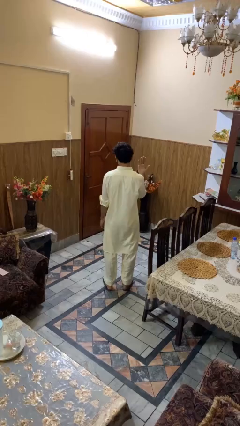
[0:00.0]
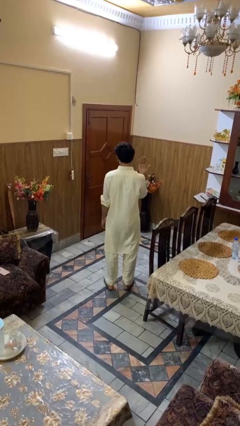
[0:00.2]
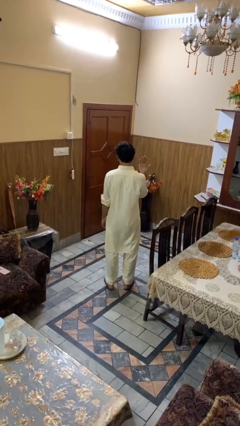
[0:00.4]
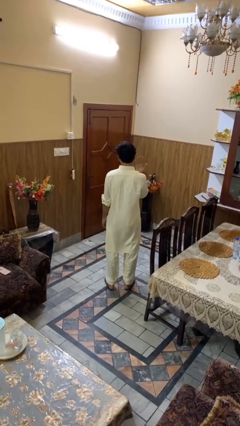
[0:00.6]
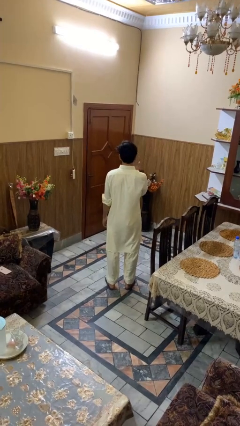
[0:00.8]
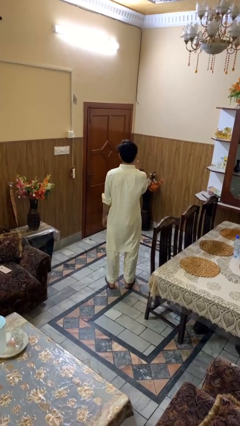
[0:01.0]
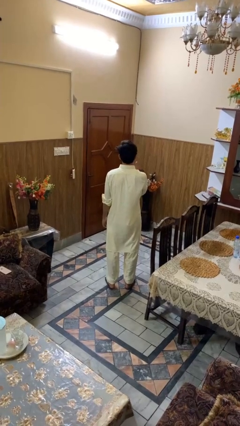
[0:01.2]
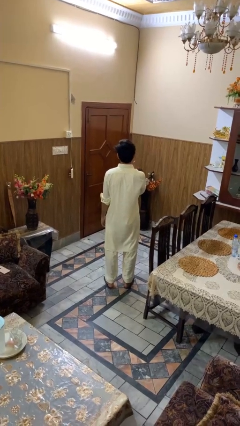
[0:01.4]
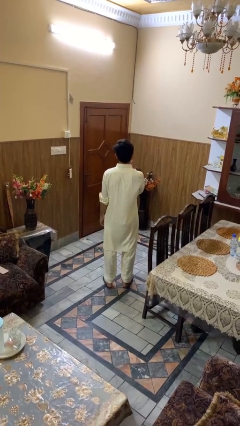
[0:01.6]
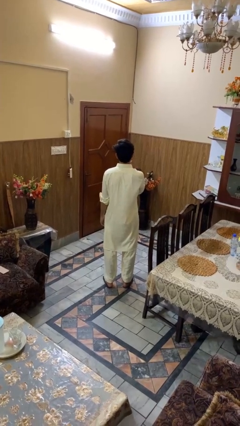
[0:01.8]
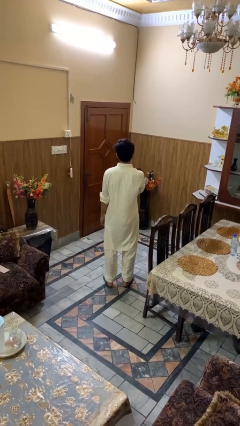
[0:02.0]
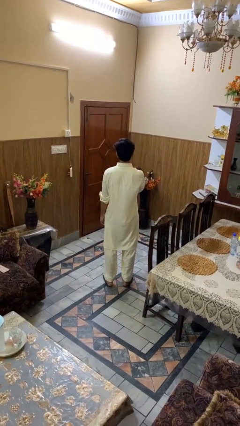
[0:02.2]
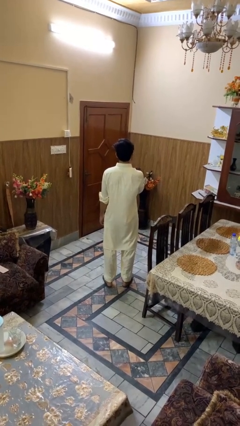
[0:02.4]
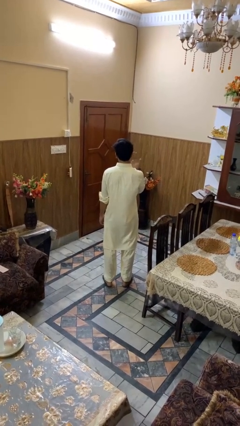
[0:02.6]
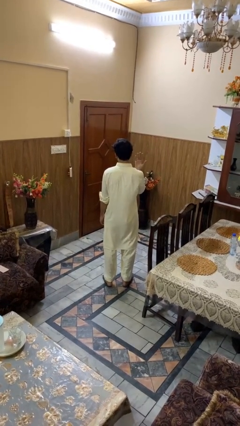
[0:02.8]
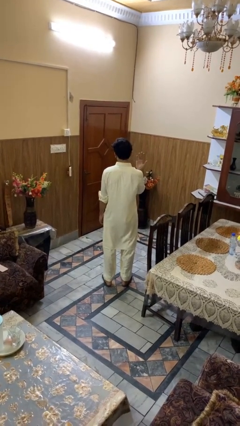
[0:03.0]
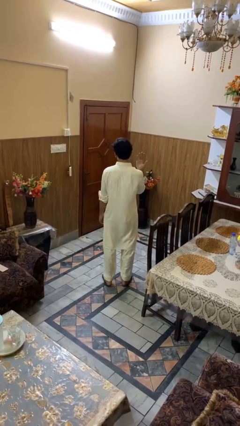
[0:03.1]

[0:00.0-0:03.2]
person licks fingers

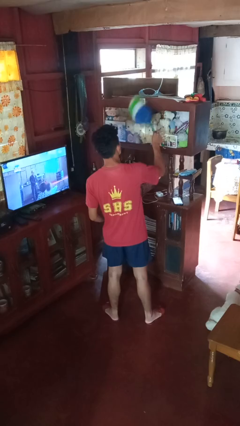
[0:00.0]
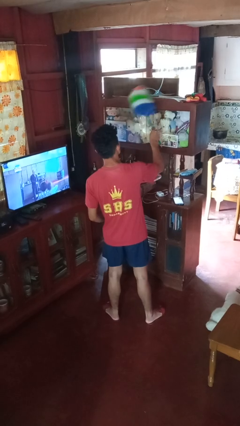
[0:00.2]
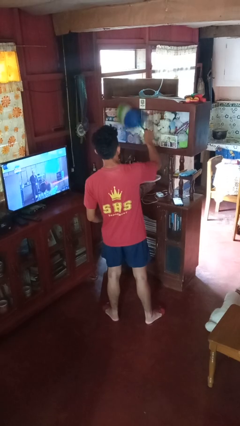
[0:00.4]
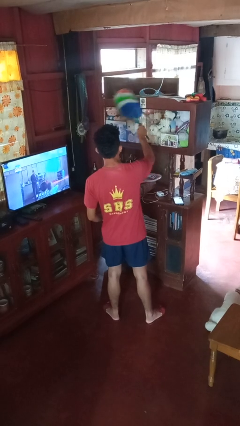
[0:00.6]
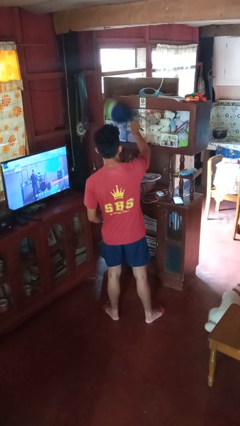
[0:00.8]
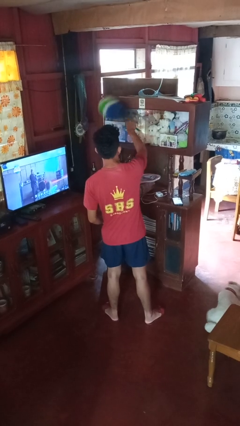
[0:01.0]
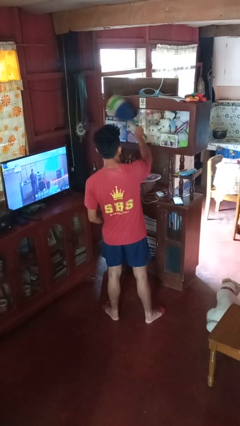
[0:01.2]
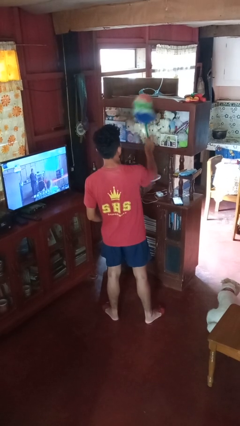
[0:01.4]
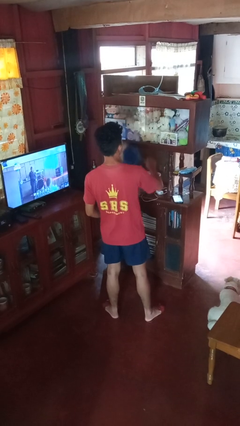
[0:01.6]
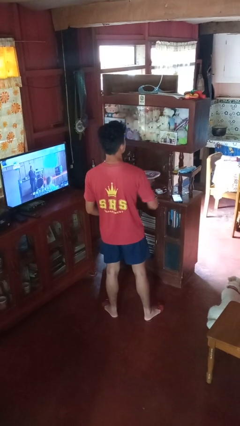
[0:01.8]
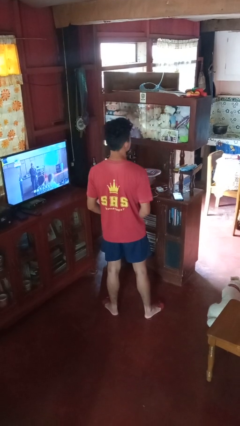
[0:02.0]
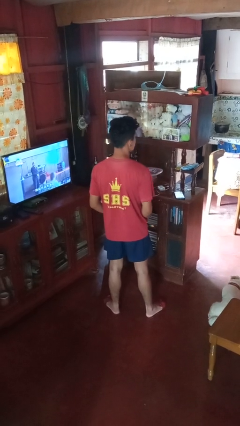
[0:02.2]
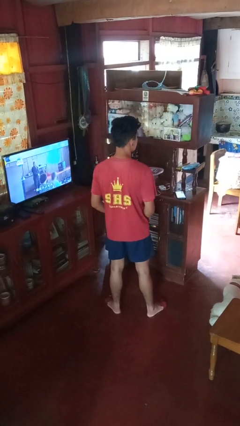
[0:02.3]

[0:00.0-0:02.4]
person dusts furniture

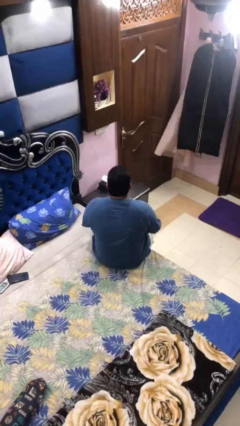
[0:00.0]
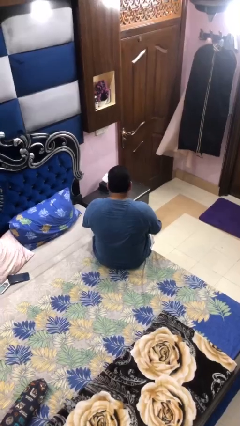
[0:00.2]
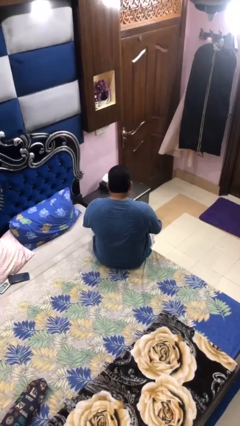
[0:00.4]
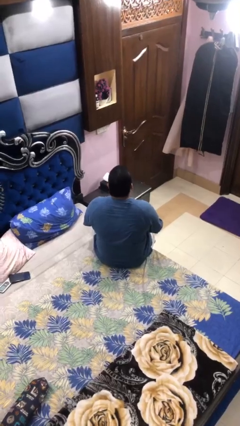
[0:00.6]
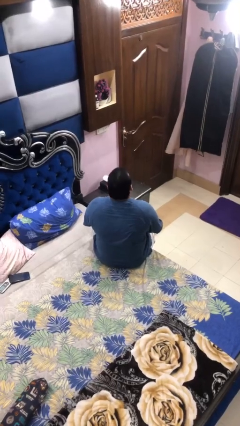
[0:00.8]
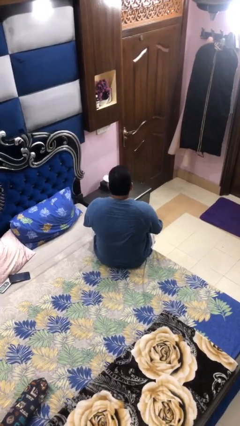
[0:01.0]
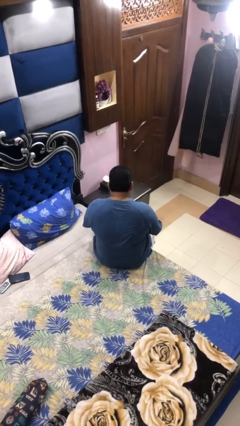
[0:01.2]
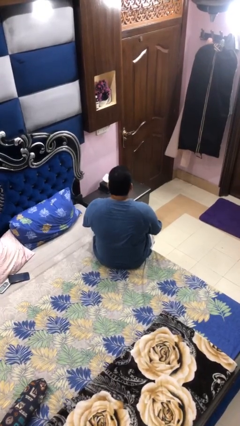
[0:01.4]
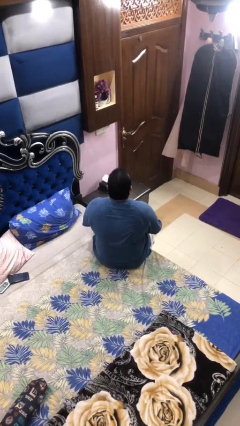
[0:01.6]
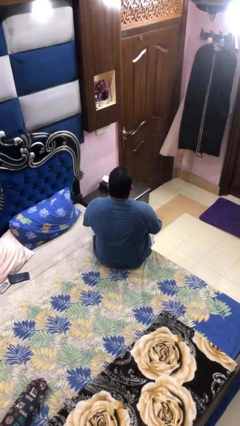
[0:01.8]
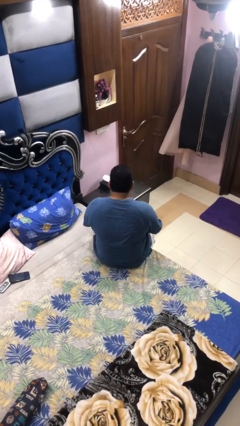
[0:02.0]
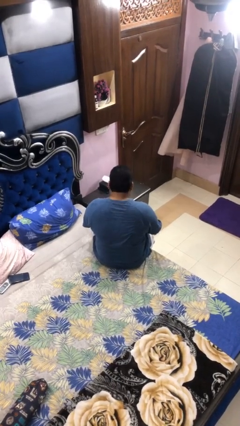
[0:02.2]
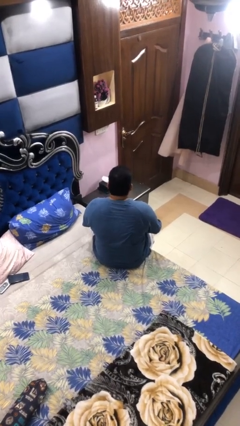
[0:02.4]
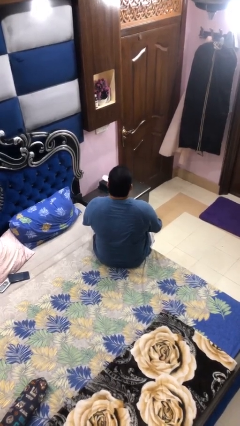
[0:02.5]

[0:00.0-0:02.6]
person nods head

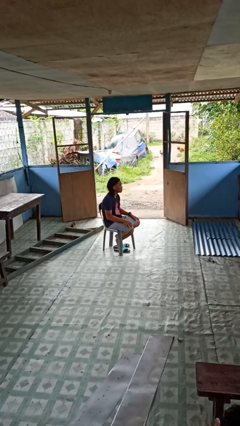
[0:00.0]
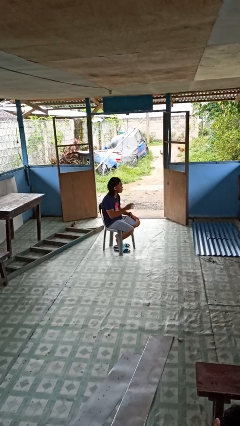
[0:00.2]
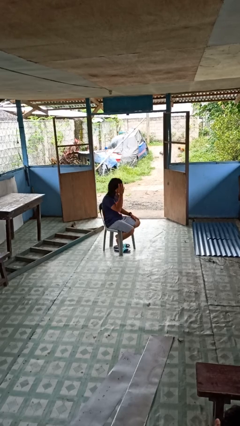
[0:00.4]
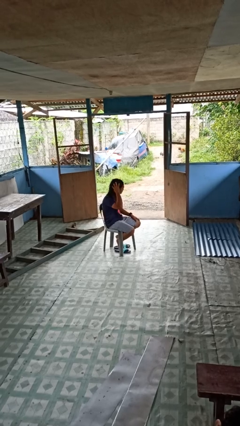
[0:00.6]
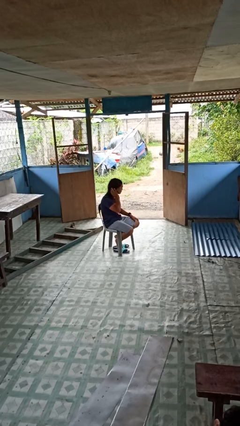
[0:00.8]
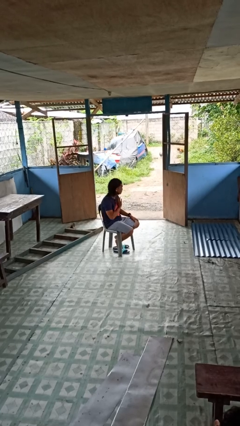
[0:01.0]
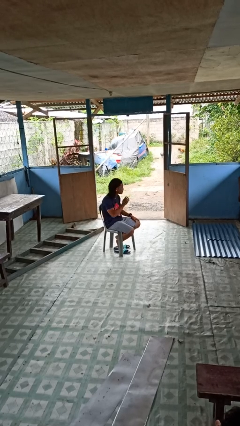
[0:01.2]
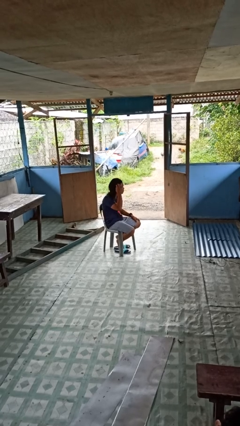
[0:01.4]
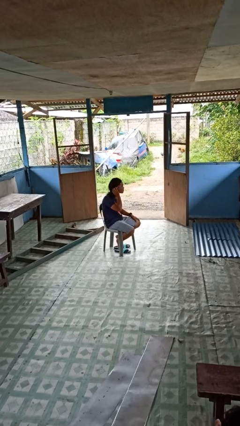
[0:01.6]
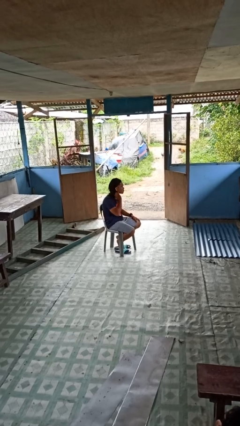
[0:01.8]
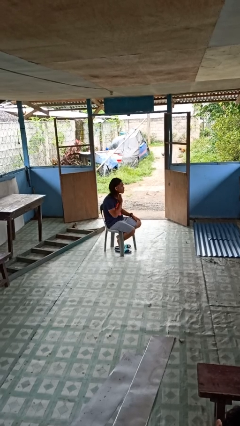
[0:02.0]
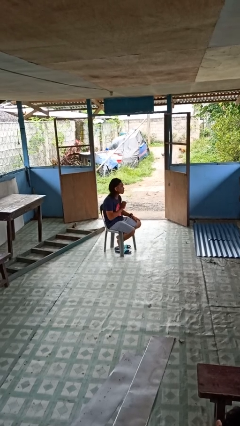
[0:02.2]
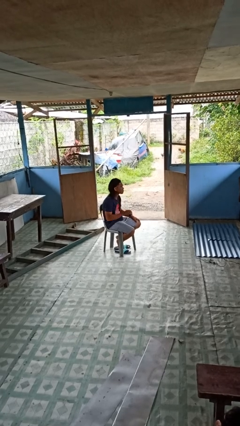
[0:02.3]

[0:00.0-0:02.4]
person strokes hair

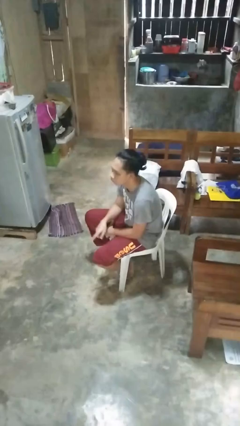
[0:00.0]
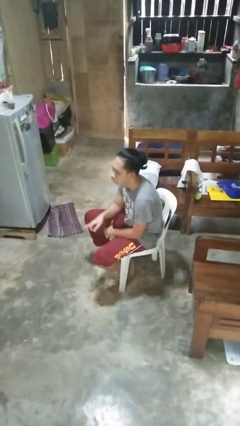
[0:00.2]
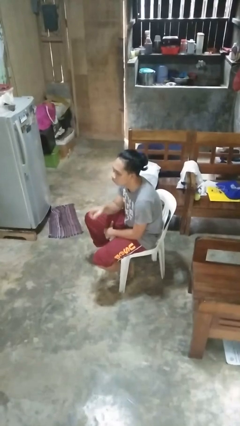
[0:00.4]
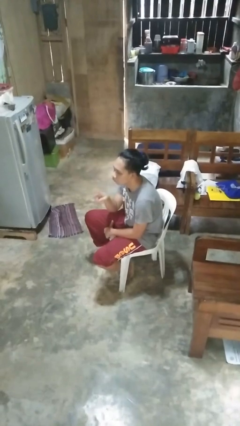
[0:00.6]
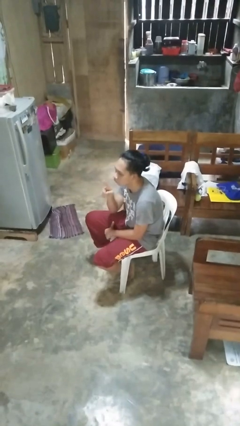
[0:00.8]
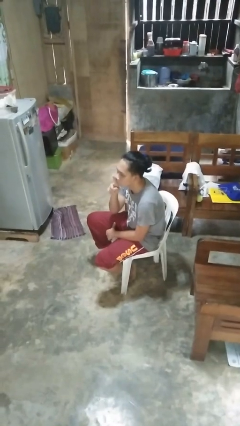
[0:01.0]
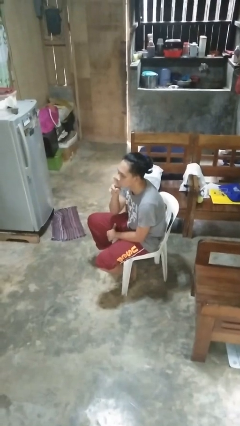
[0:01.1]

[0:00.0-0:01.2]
person gestures be quiet

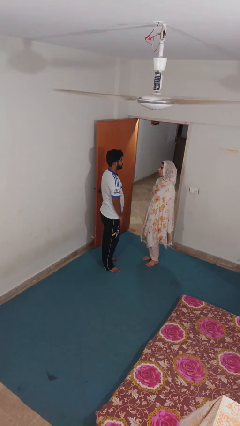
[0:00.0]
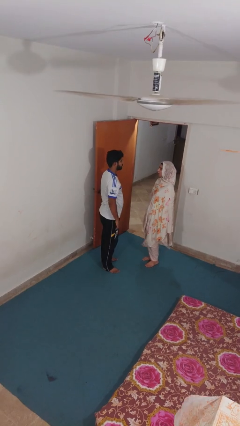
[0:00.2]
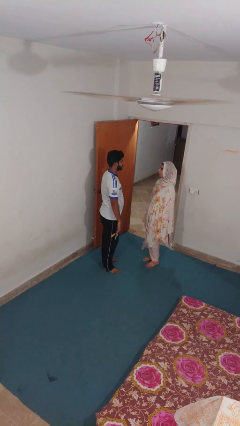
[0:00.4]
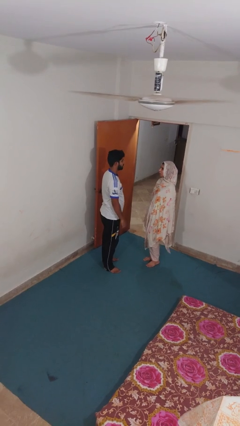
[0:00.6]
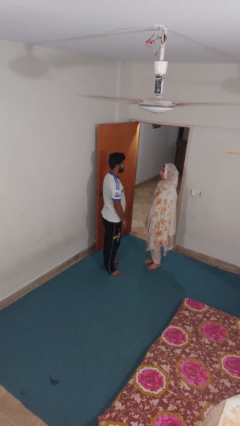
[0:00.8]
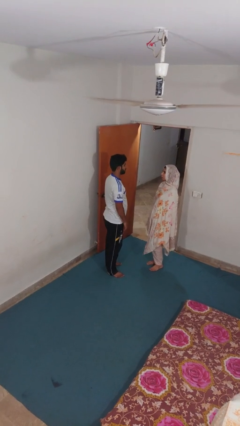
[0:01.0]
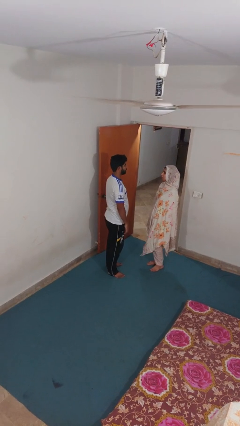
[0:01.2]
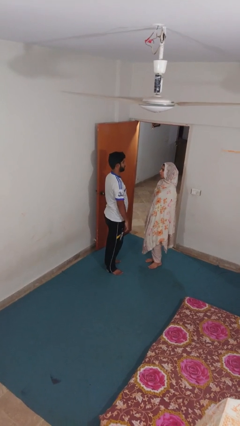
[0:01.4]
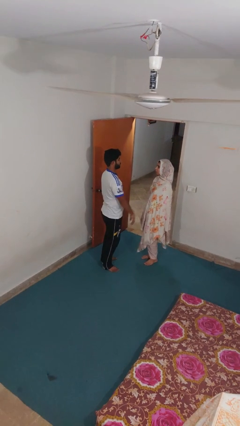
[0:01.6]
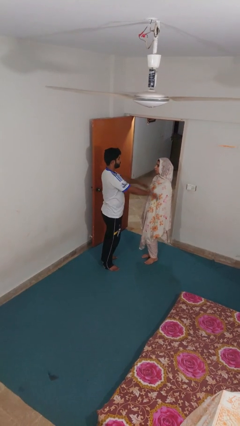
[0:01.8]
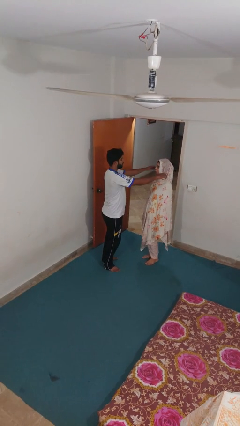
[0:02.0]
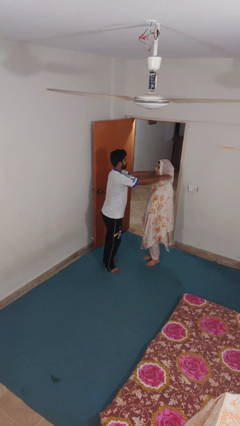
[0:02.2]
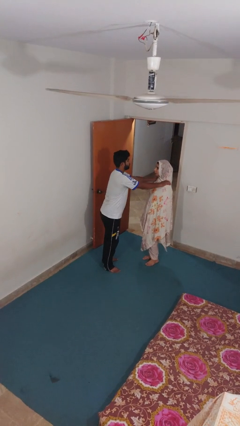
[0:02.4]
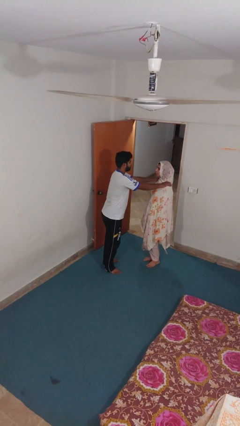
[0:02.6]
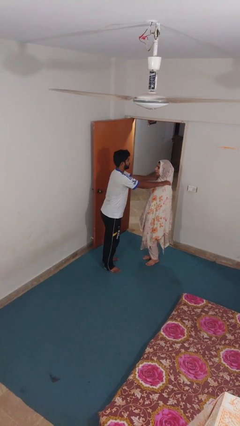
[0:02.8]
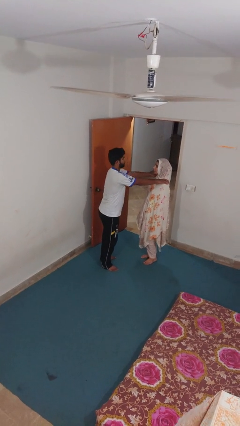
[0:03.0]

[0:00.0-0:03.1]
person pounds shoulders of person

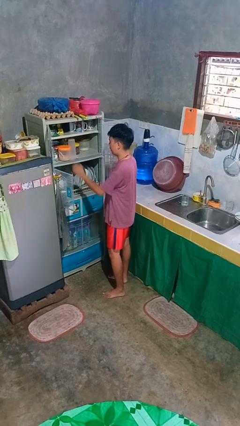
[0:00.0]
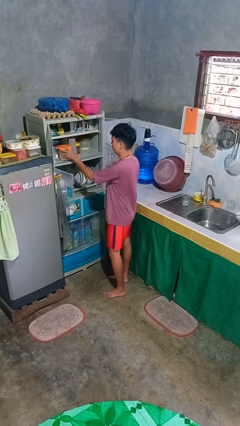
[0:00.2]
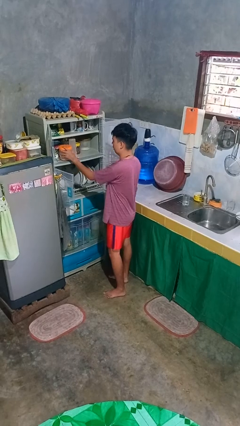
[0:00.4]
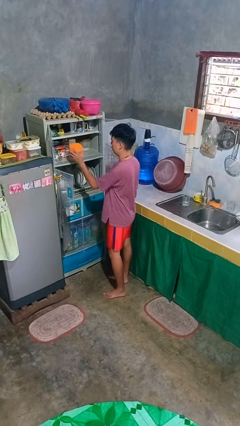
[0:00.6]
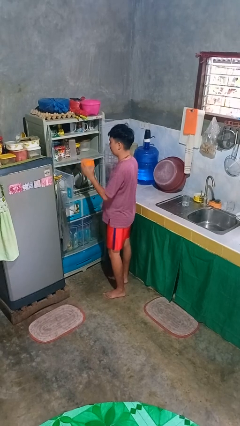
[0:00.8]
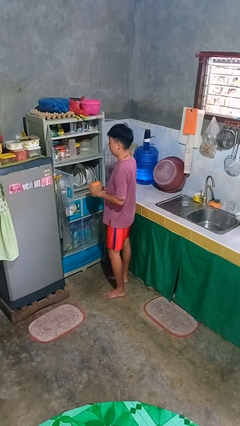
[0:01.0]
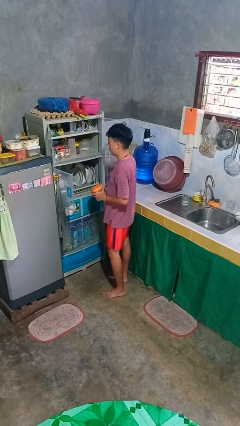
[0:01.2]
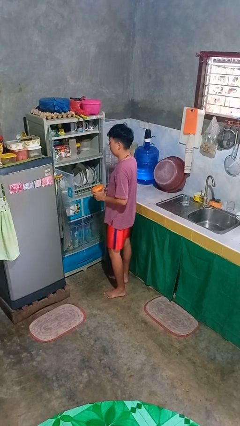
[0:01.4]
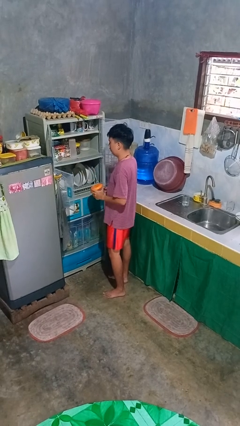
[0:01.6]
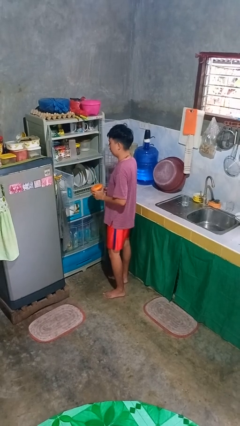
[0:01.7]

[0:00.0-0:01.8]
person takes object from cabinet

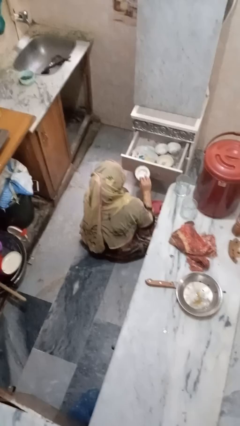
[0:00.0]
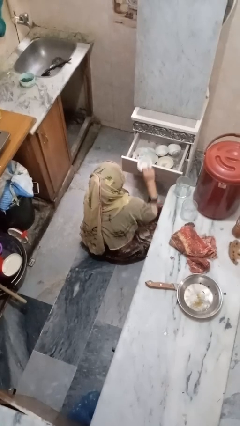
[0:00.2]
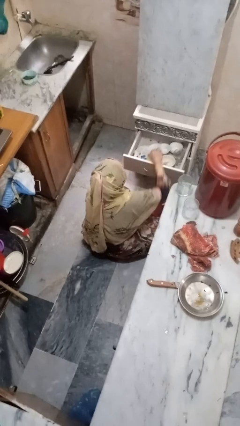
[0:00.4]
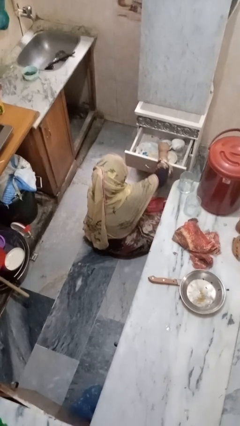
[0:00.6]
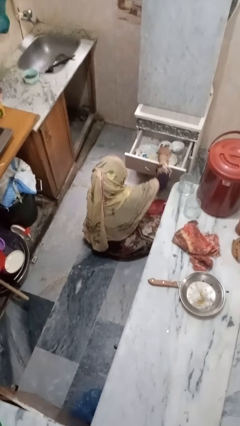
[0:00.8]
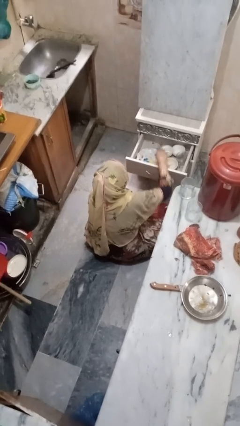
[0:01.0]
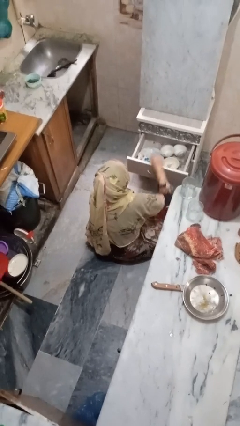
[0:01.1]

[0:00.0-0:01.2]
person puts object into kitchen drawer
